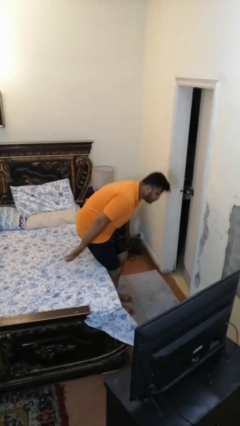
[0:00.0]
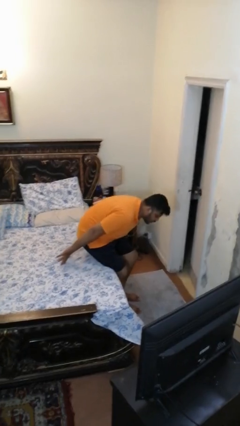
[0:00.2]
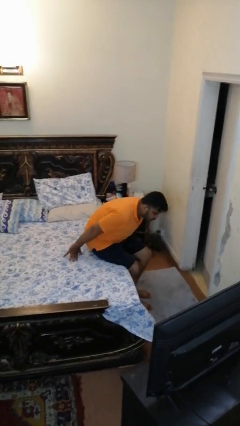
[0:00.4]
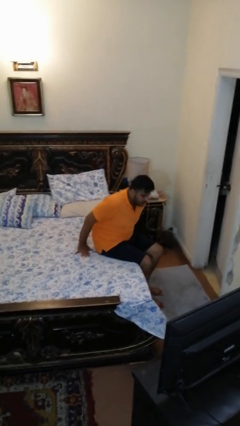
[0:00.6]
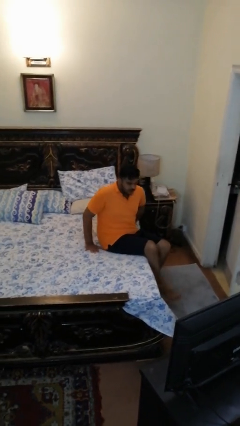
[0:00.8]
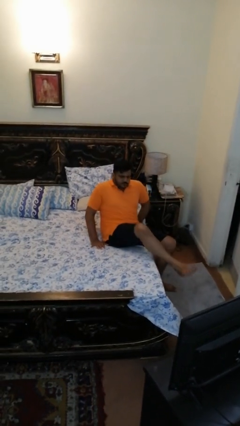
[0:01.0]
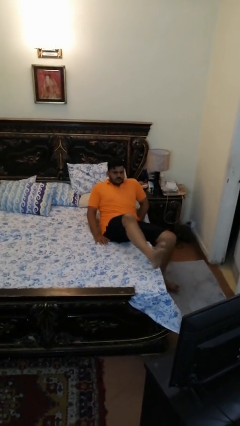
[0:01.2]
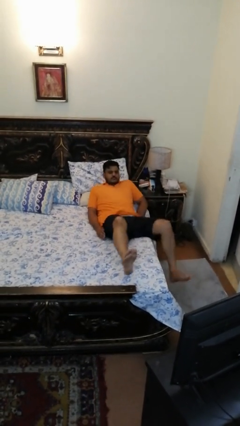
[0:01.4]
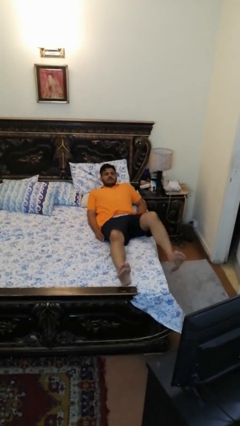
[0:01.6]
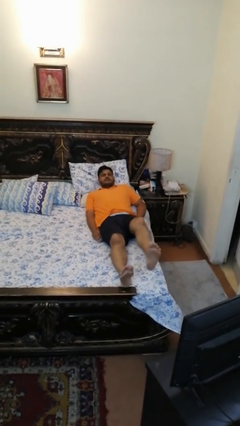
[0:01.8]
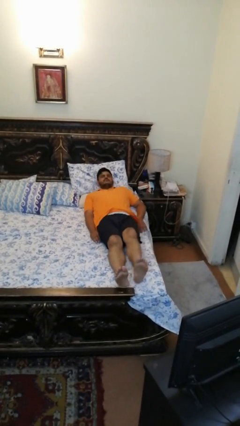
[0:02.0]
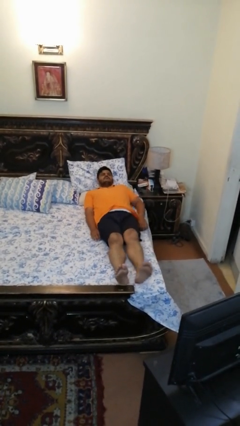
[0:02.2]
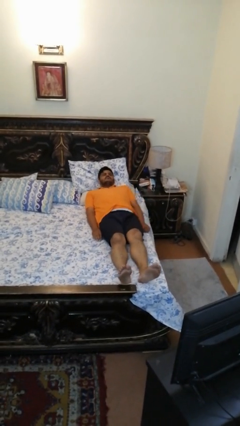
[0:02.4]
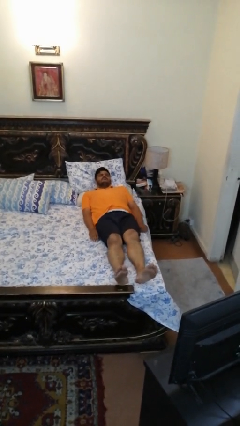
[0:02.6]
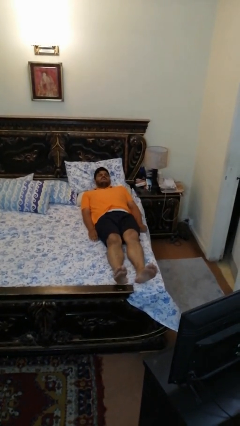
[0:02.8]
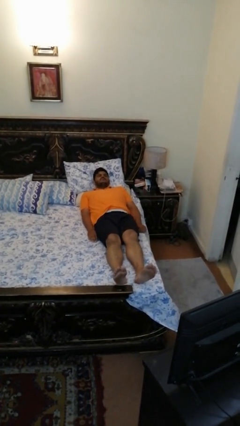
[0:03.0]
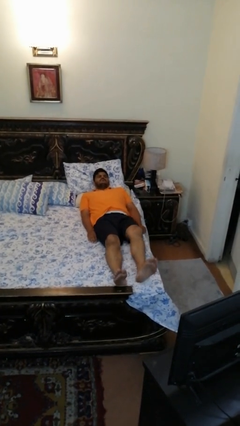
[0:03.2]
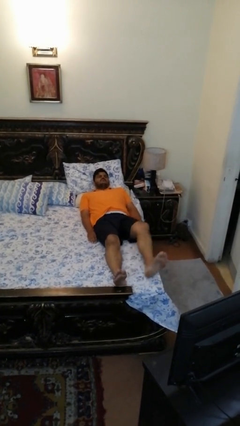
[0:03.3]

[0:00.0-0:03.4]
person lies down on bed

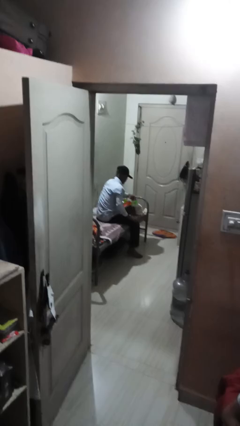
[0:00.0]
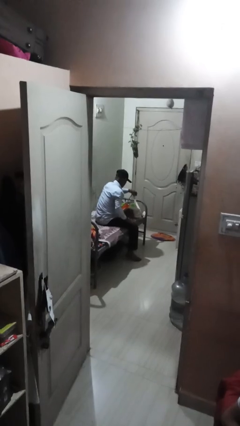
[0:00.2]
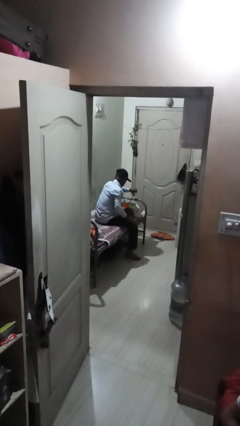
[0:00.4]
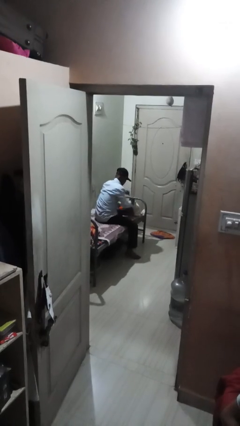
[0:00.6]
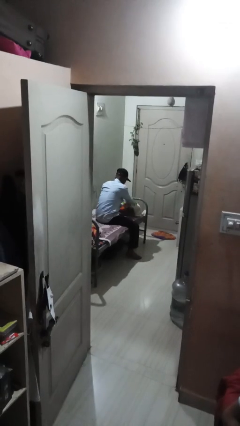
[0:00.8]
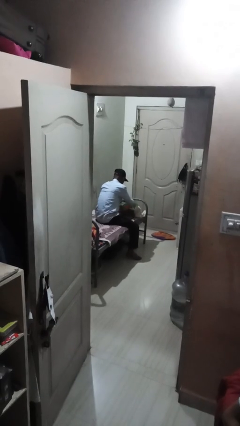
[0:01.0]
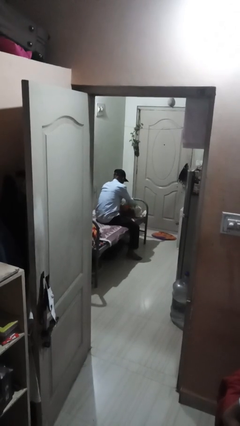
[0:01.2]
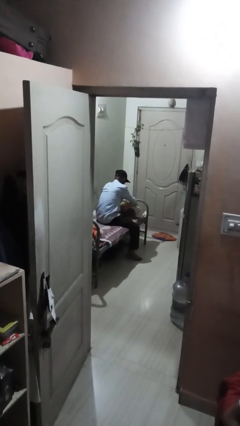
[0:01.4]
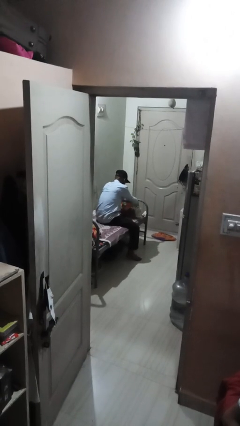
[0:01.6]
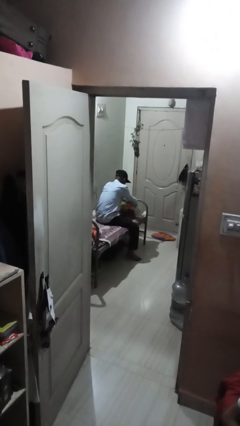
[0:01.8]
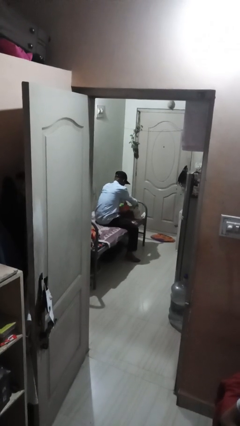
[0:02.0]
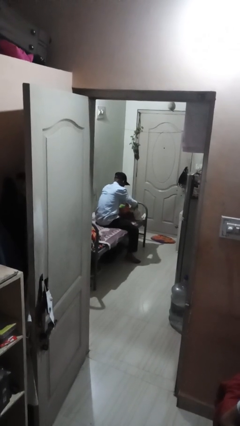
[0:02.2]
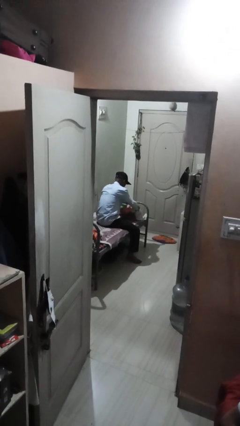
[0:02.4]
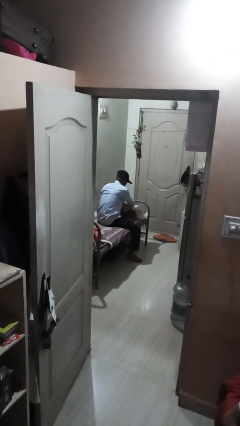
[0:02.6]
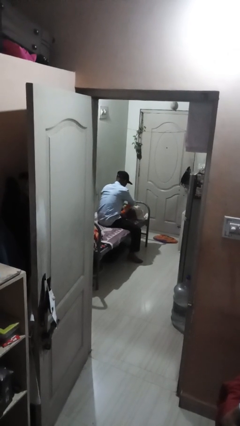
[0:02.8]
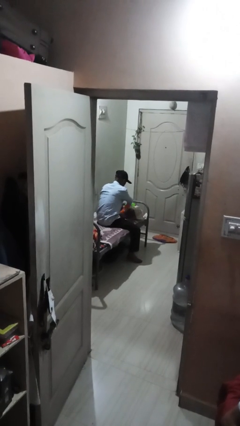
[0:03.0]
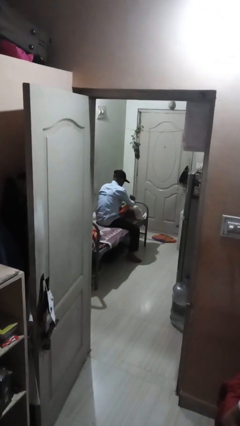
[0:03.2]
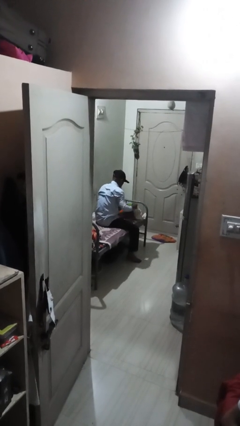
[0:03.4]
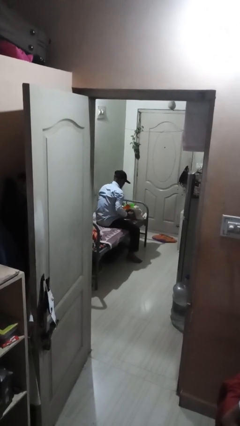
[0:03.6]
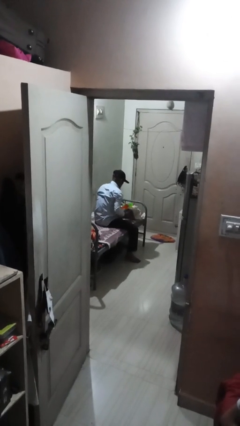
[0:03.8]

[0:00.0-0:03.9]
person searches in bag

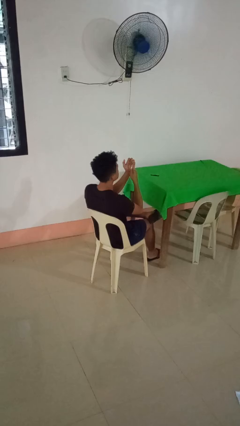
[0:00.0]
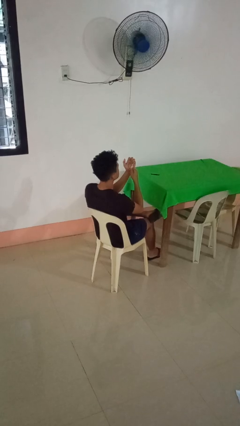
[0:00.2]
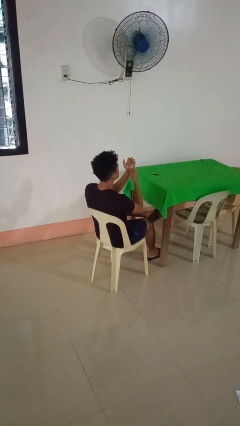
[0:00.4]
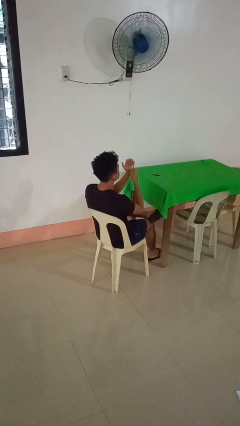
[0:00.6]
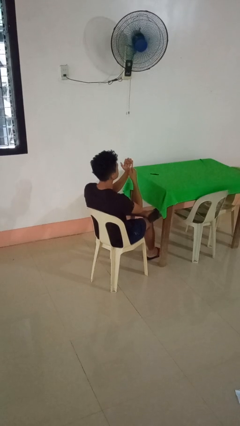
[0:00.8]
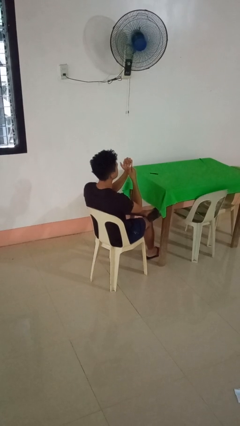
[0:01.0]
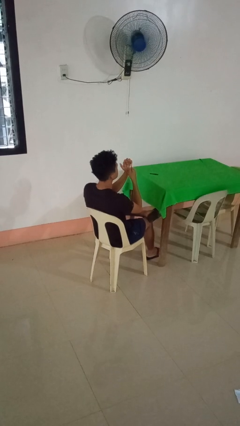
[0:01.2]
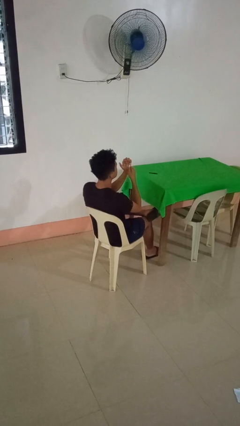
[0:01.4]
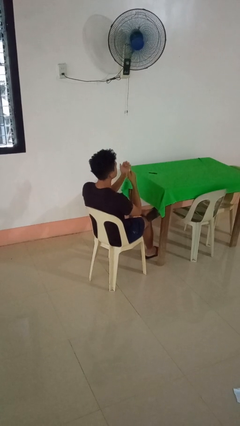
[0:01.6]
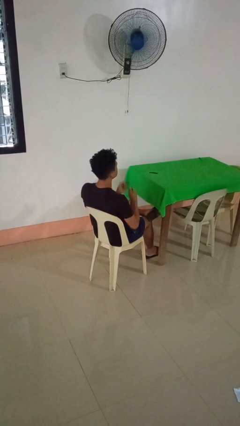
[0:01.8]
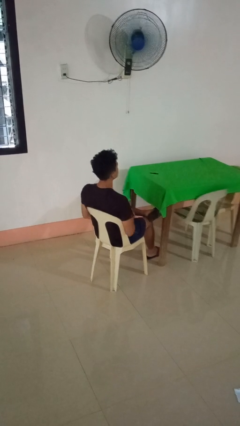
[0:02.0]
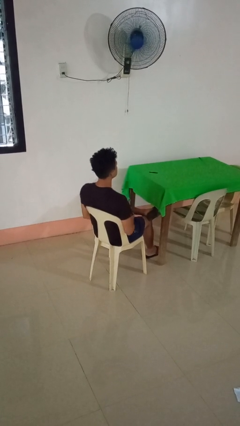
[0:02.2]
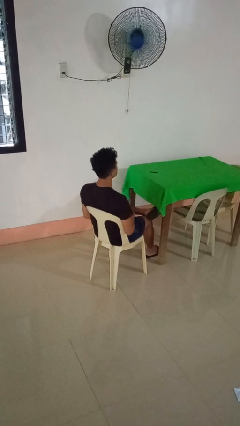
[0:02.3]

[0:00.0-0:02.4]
person clips fingernails

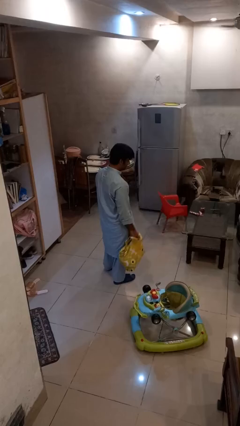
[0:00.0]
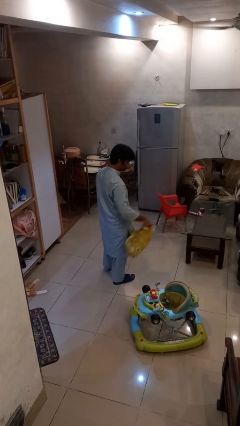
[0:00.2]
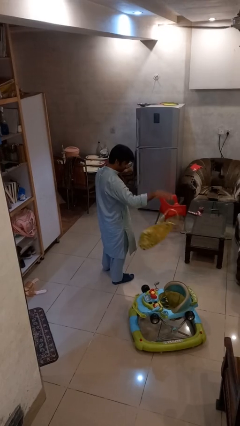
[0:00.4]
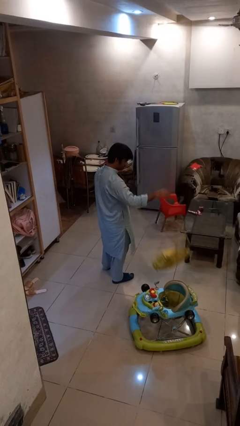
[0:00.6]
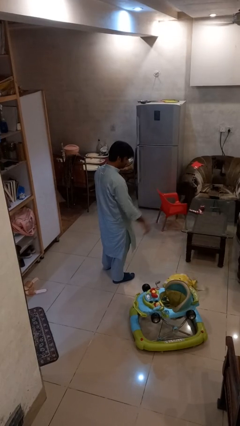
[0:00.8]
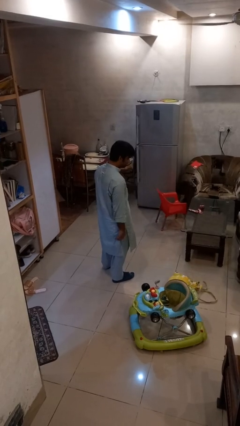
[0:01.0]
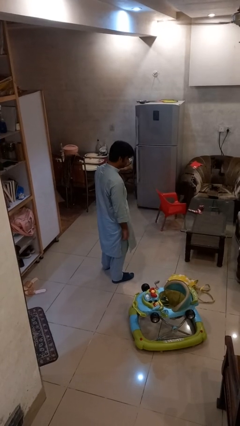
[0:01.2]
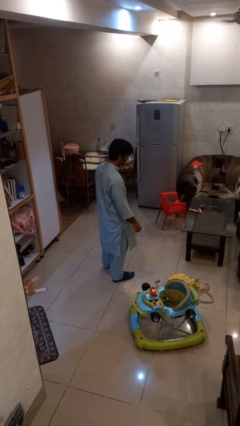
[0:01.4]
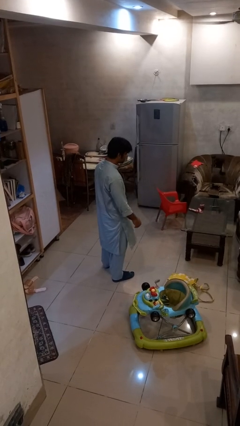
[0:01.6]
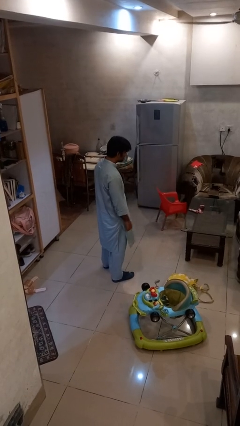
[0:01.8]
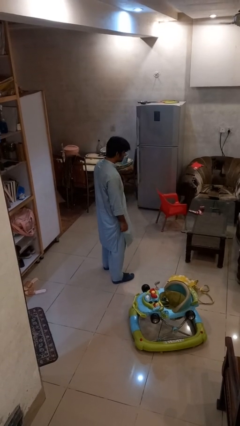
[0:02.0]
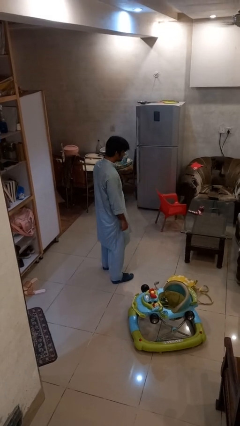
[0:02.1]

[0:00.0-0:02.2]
person throws object to ground

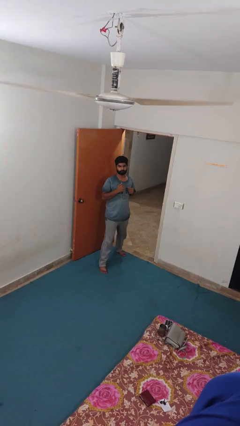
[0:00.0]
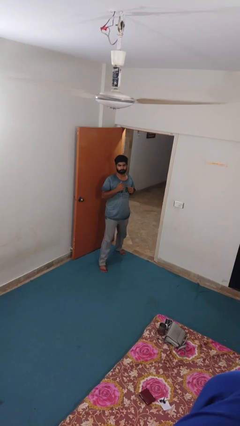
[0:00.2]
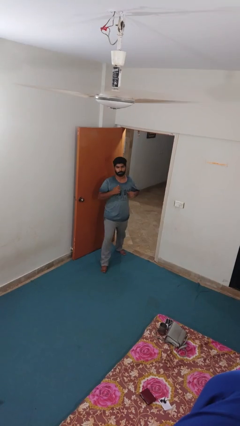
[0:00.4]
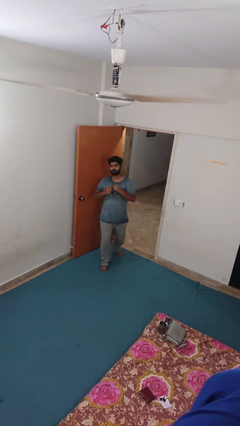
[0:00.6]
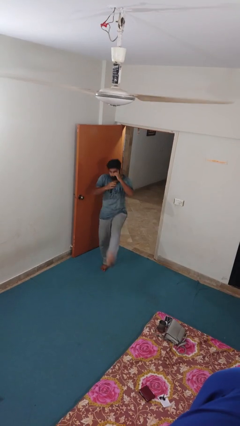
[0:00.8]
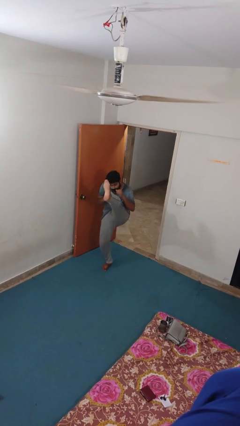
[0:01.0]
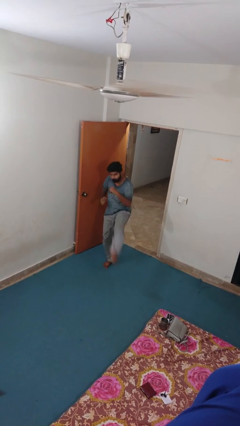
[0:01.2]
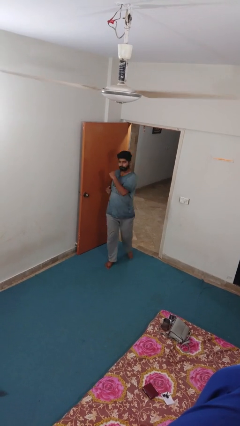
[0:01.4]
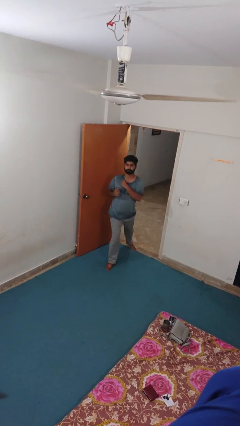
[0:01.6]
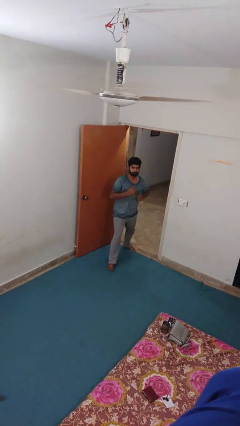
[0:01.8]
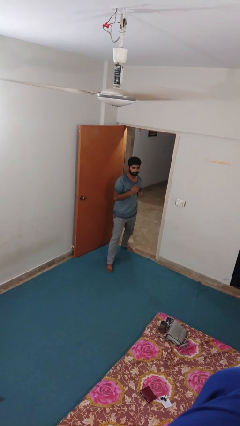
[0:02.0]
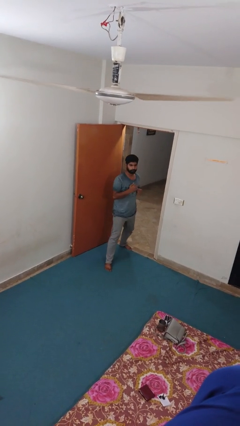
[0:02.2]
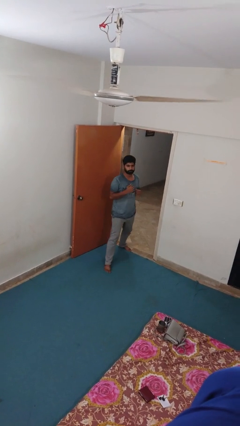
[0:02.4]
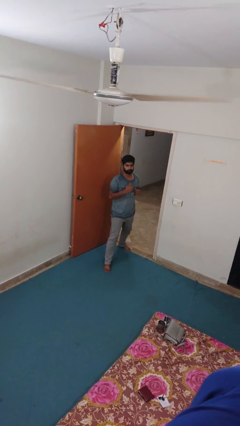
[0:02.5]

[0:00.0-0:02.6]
person karate kicks

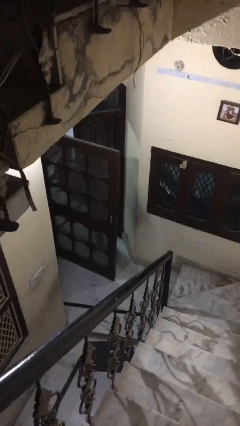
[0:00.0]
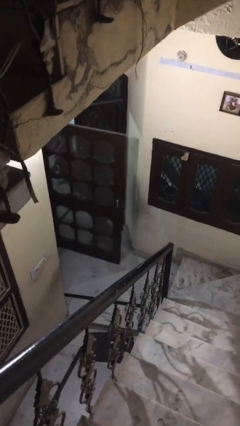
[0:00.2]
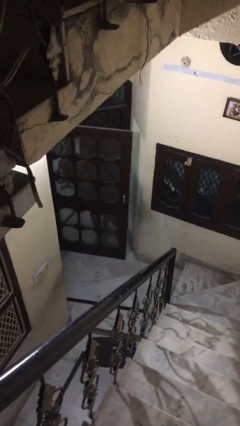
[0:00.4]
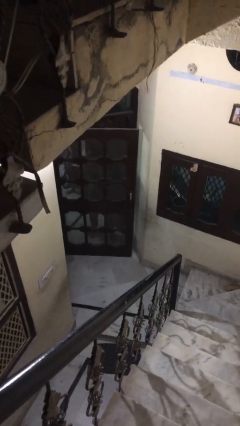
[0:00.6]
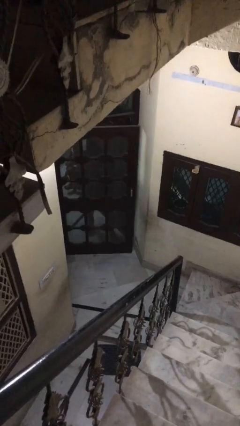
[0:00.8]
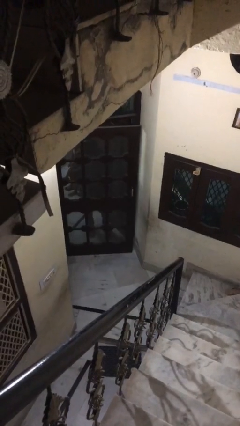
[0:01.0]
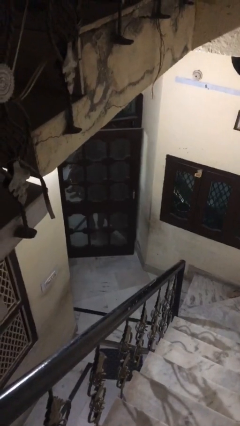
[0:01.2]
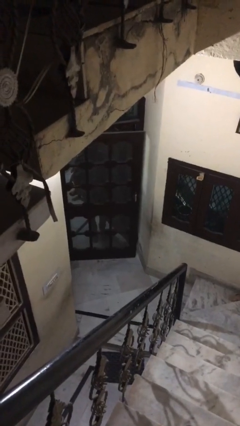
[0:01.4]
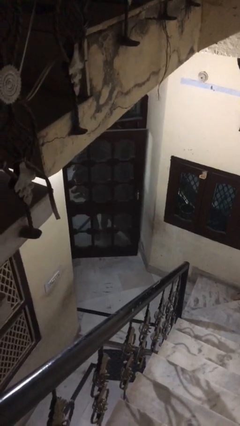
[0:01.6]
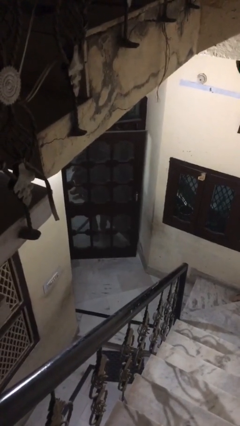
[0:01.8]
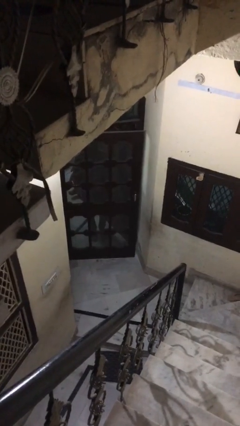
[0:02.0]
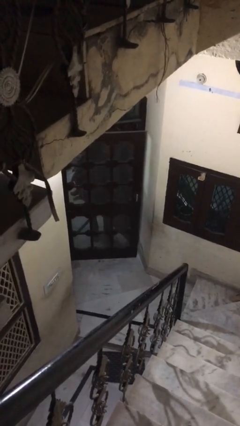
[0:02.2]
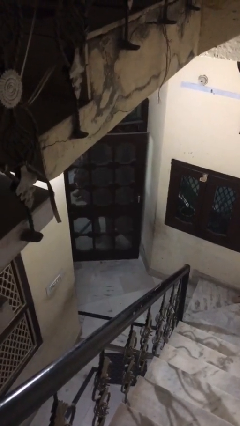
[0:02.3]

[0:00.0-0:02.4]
person closes facility door

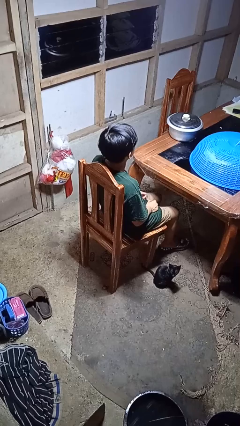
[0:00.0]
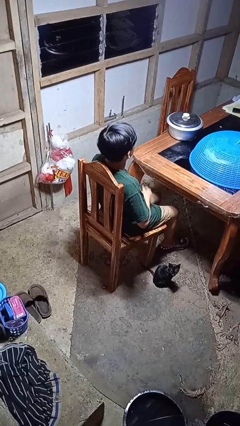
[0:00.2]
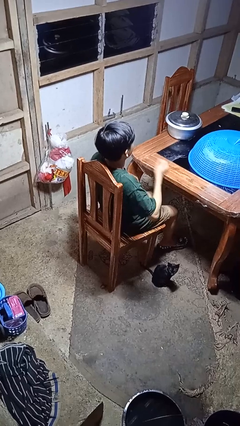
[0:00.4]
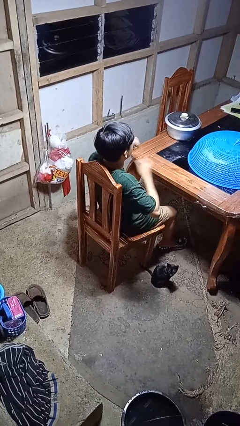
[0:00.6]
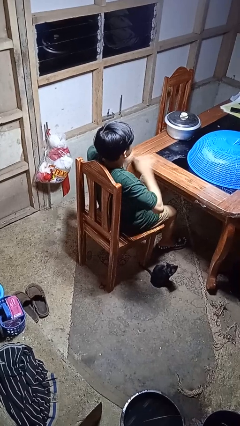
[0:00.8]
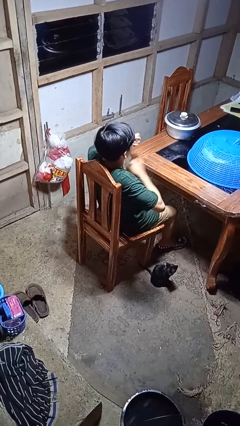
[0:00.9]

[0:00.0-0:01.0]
person drums on chest
